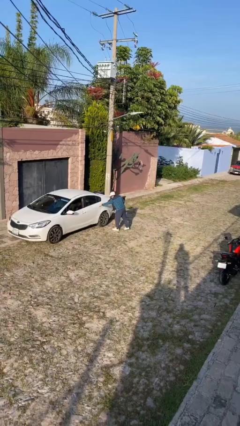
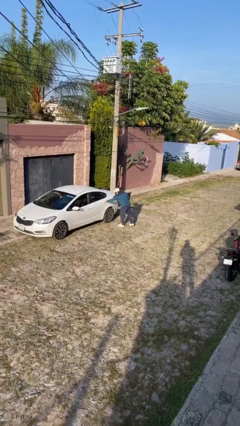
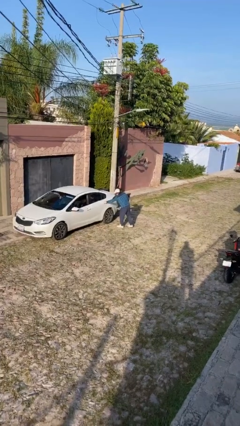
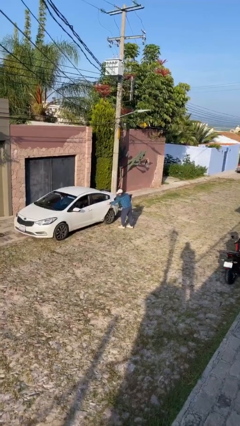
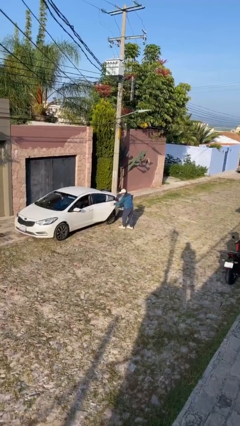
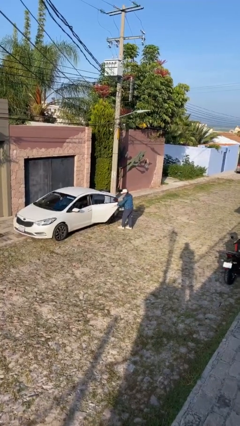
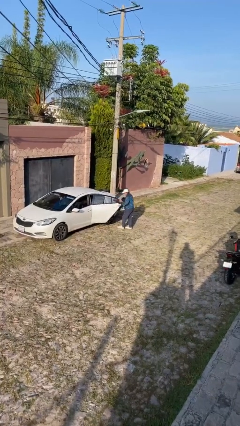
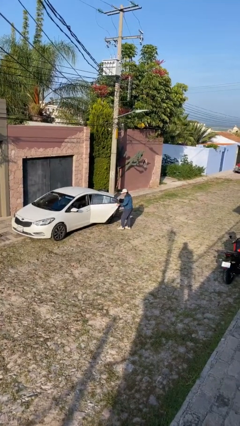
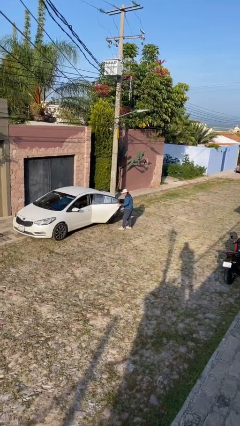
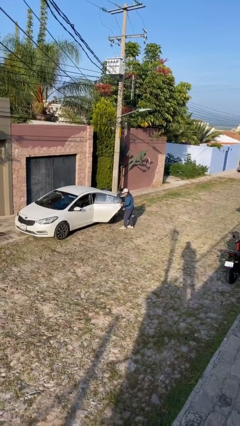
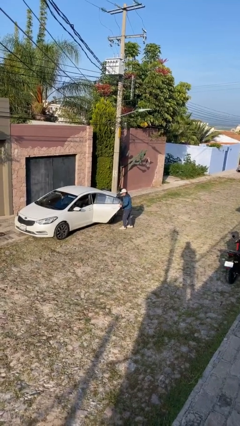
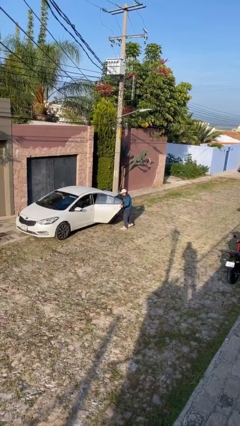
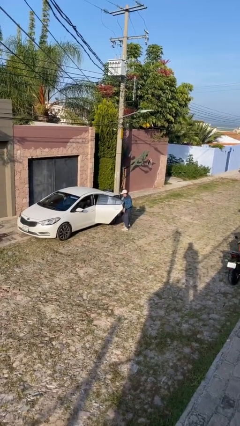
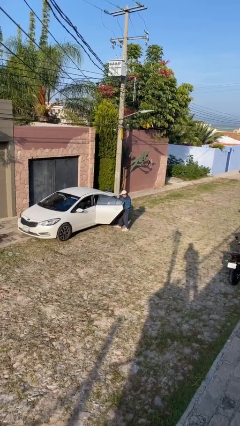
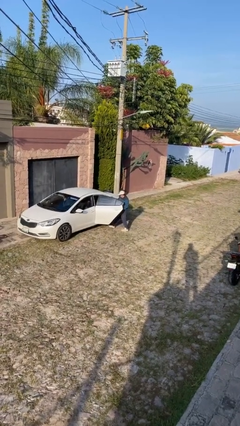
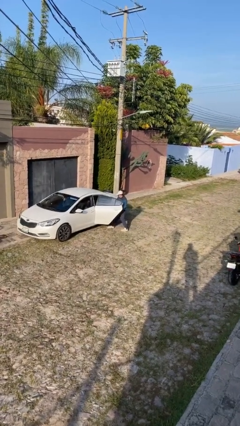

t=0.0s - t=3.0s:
person opens car door

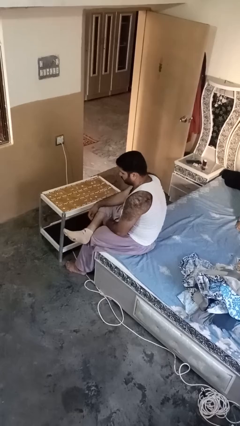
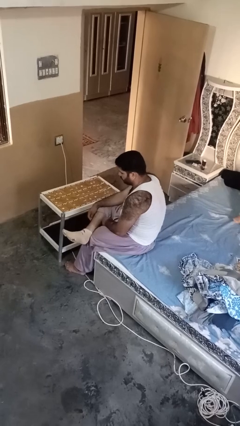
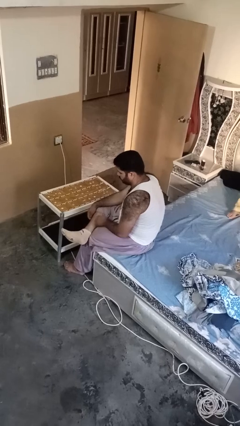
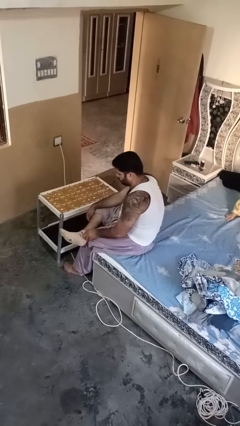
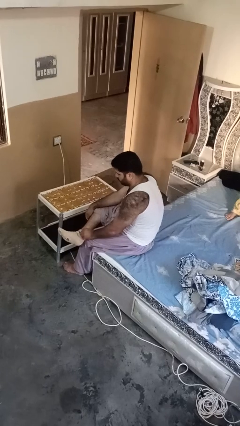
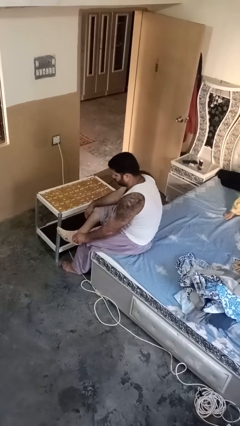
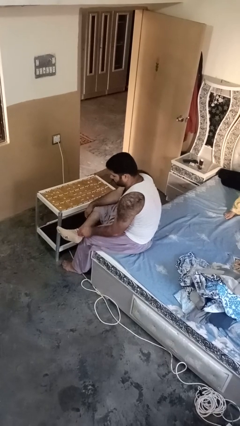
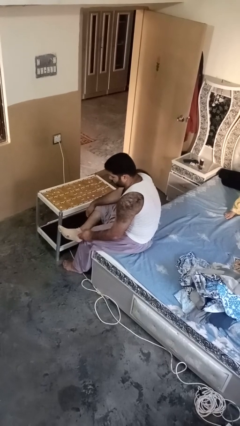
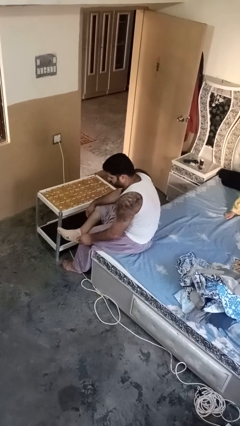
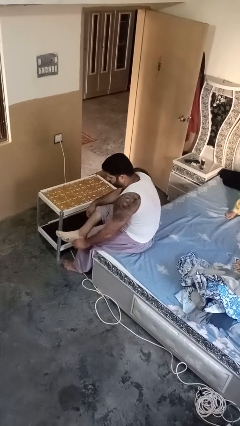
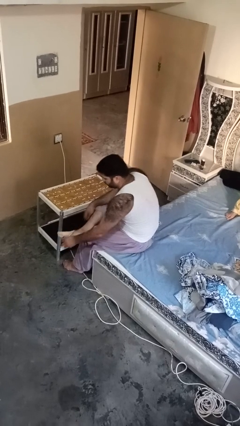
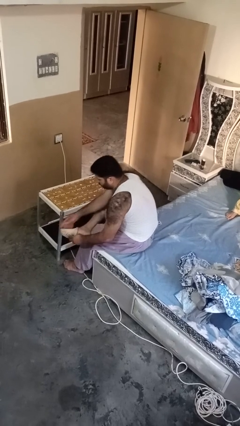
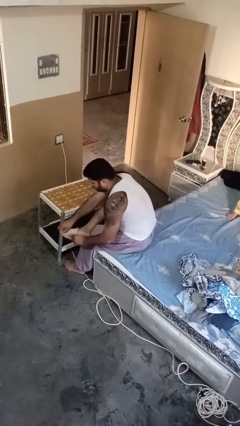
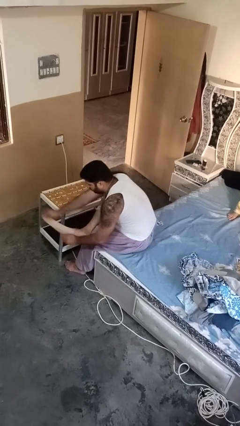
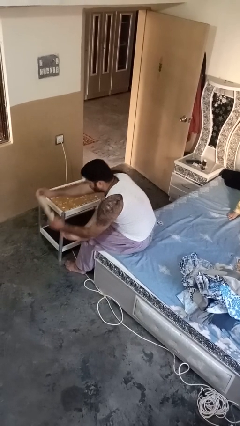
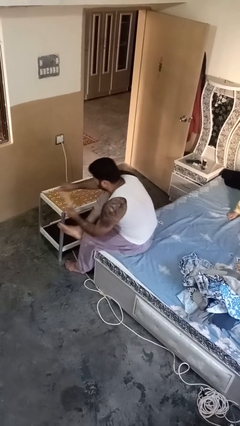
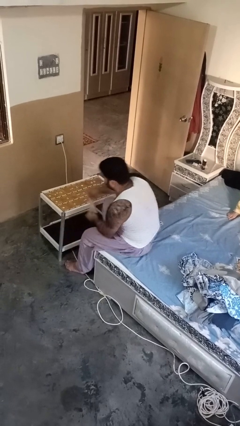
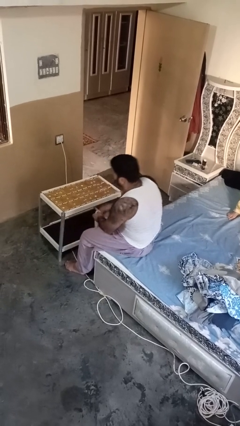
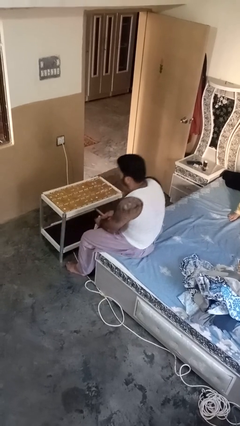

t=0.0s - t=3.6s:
person takes off socks

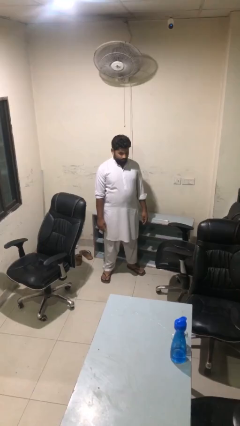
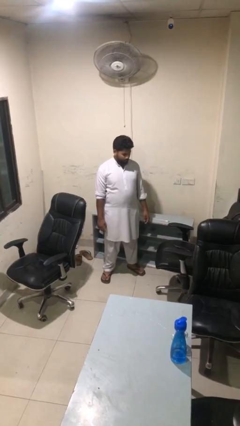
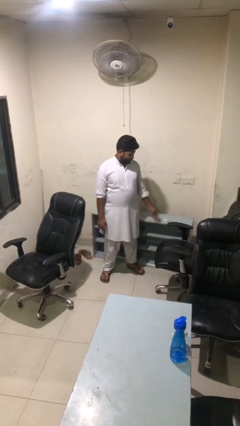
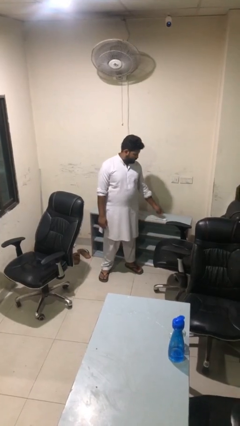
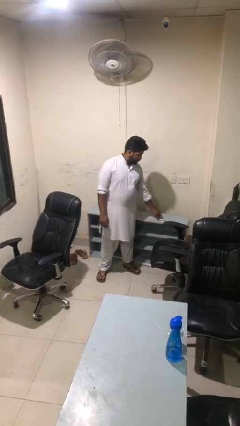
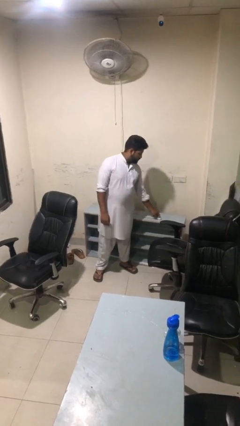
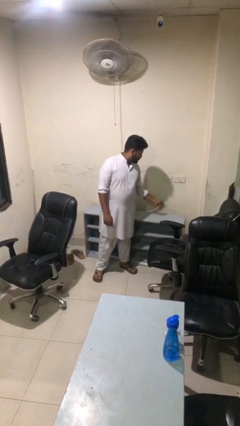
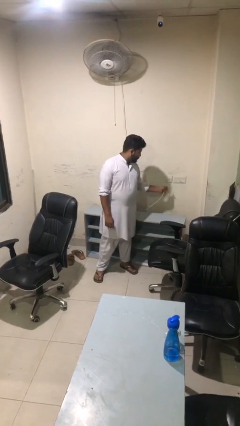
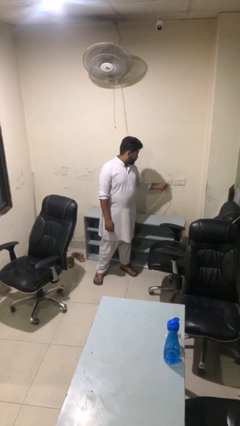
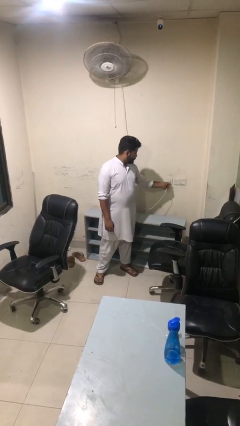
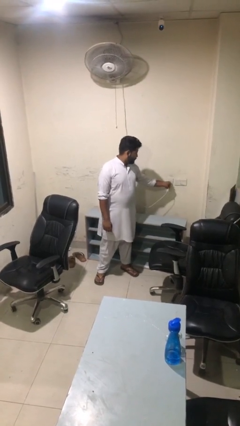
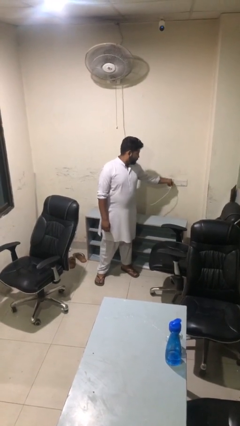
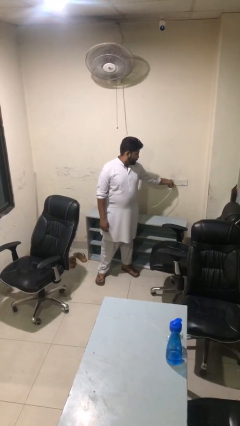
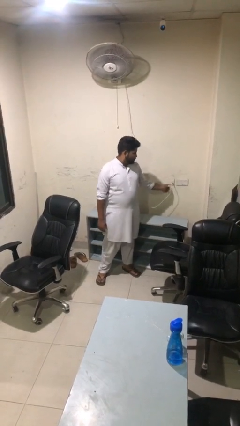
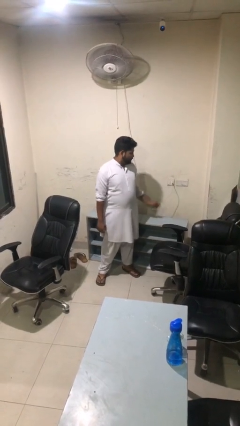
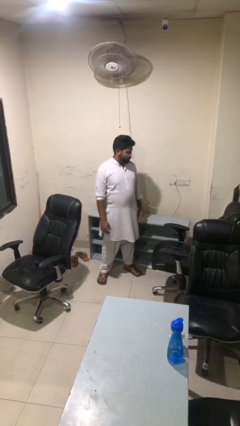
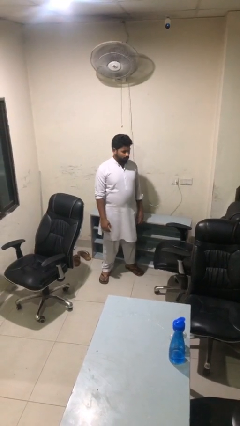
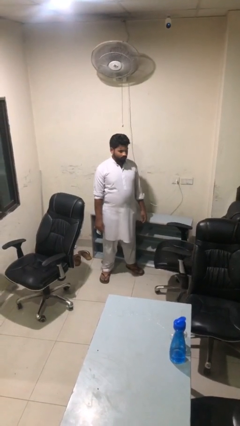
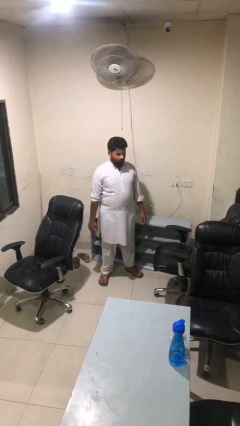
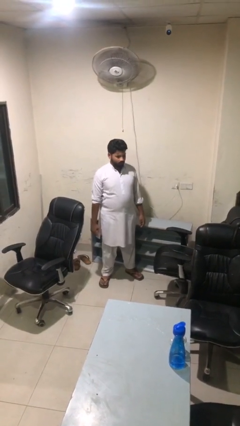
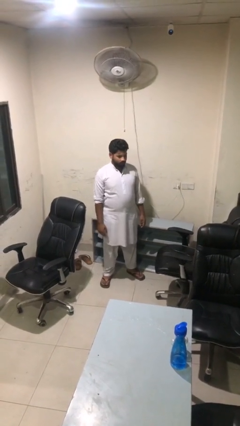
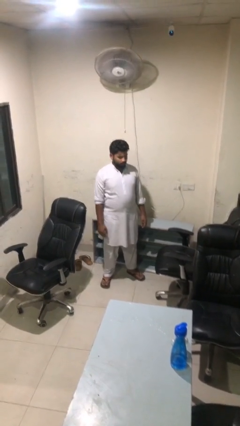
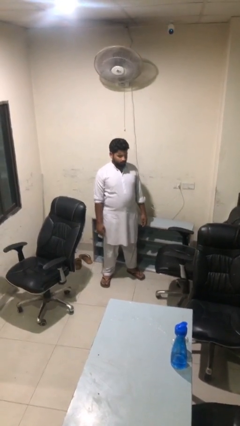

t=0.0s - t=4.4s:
person plugs into electrical socket

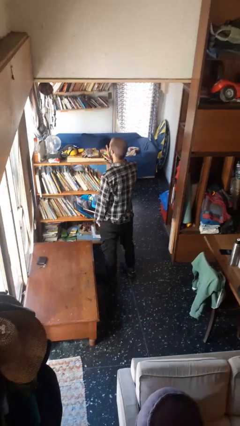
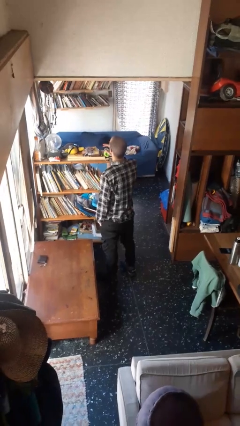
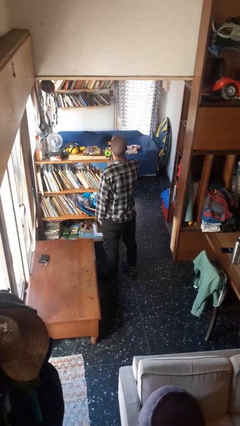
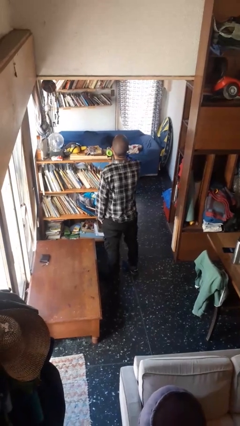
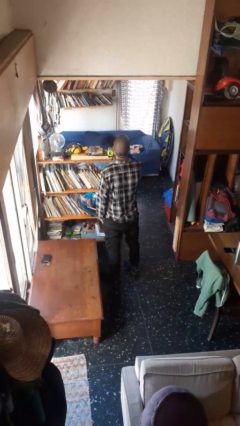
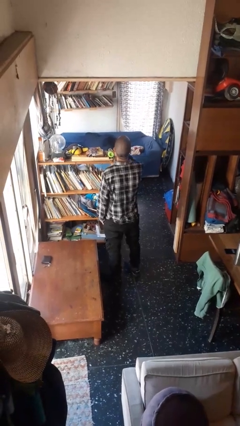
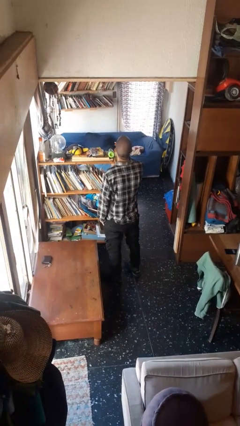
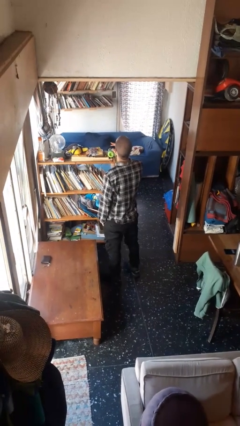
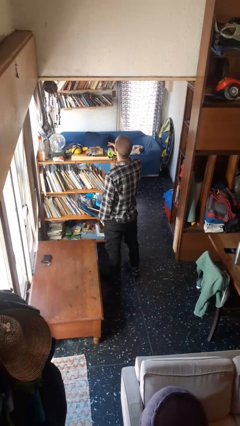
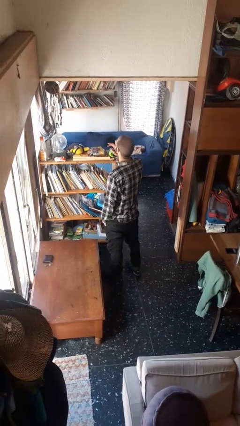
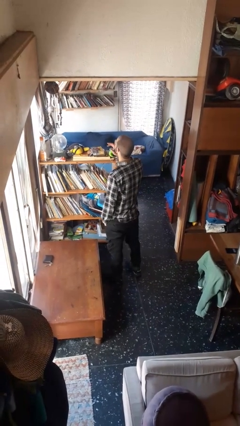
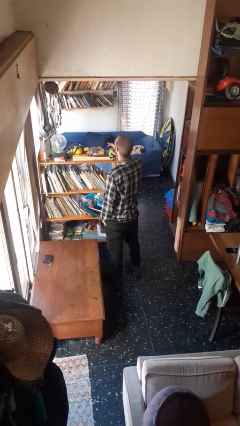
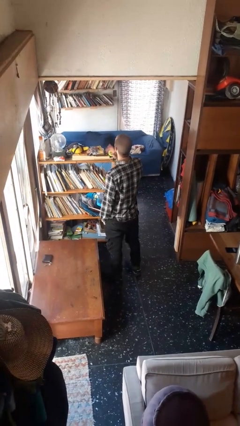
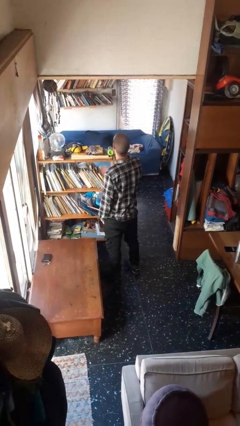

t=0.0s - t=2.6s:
person gestures be quiet

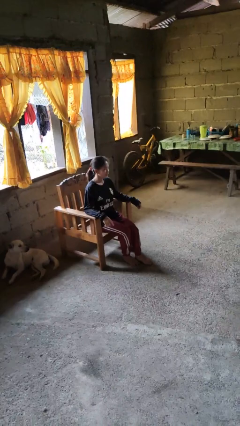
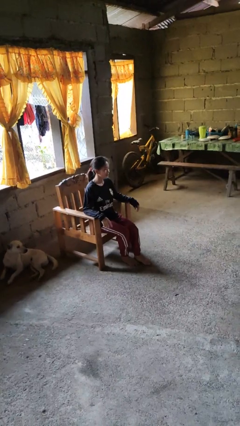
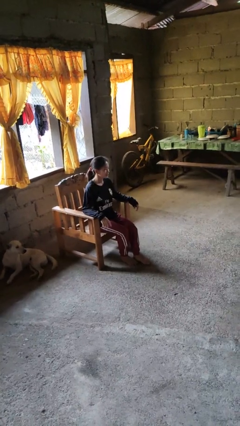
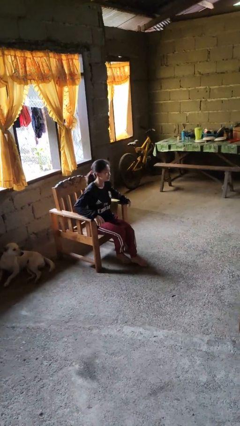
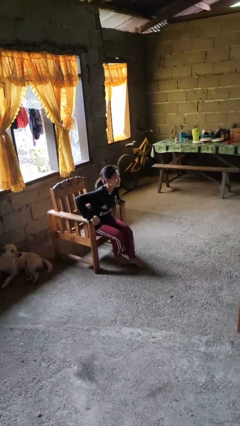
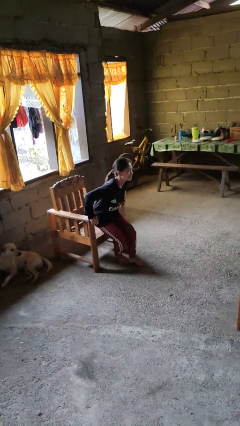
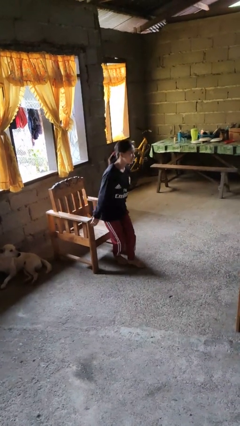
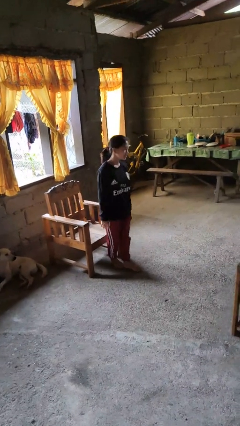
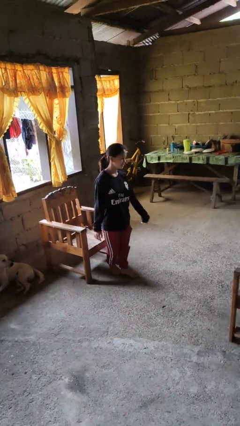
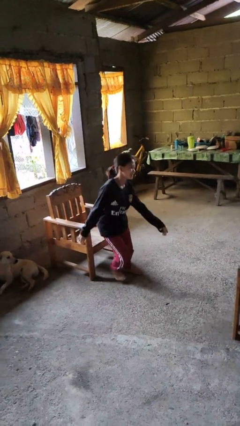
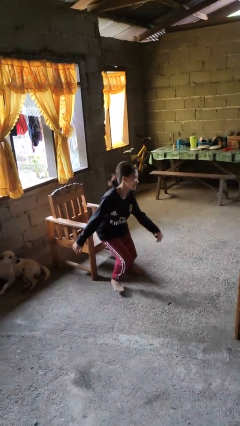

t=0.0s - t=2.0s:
person stands up from floor

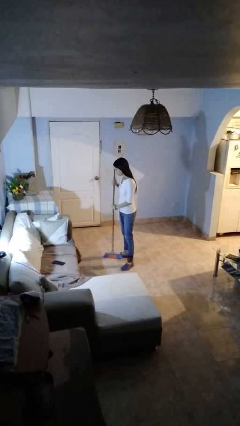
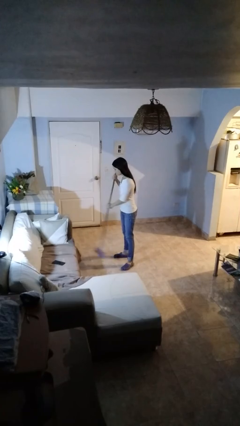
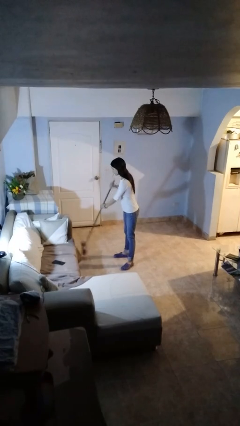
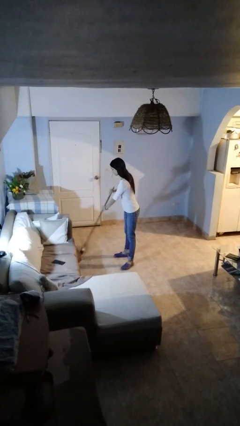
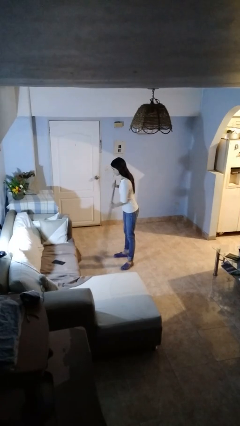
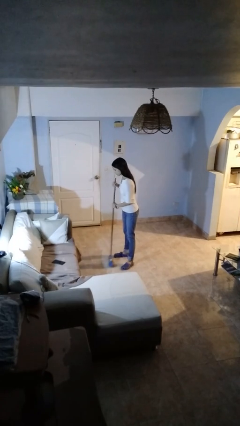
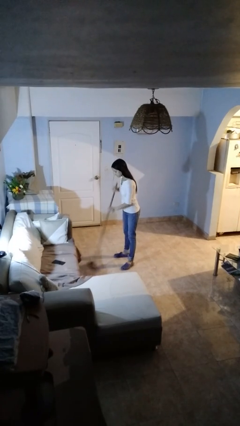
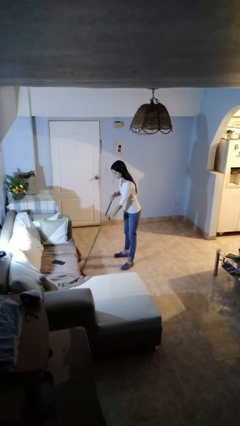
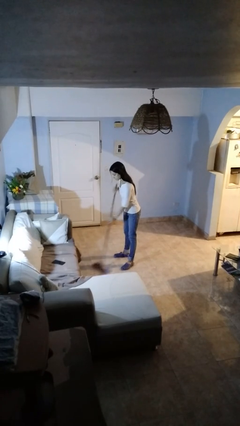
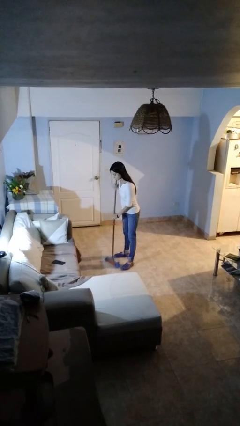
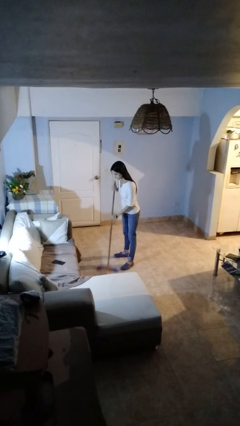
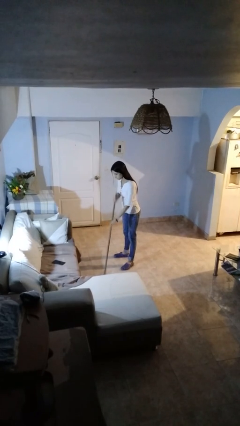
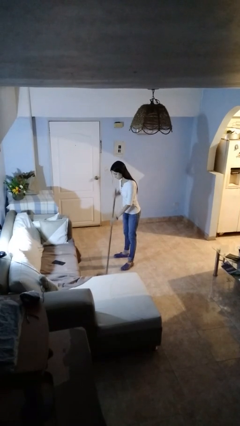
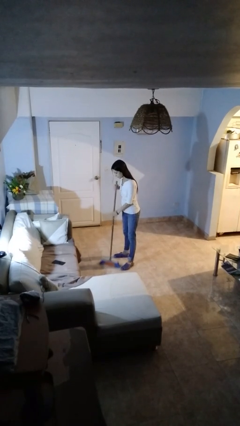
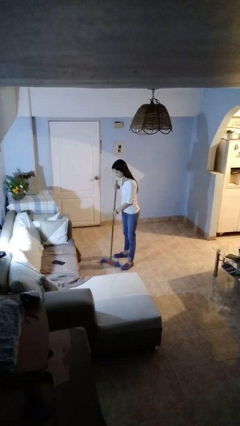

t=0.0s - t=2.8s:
person sweeps floor
